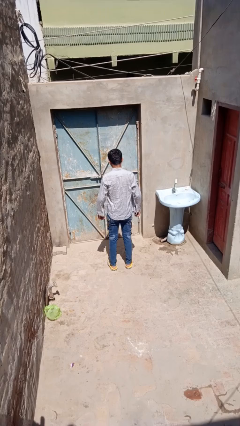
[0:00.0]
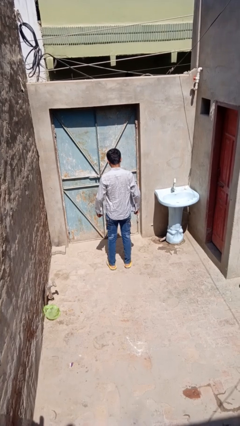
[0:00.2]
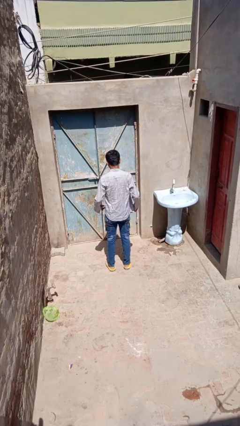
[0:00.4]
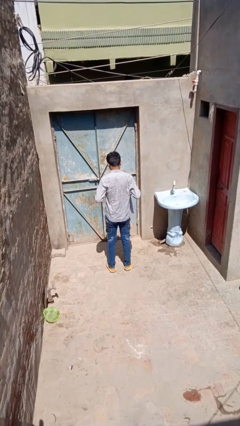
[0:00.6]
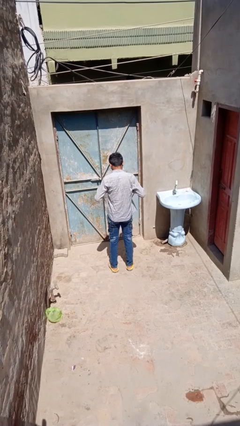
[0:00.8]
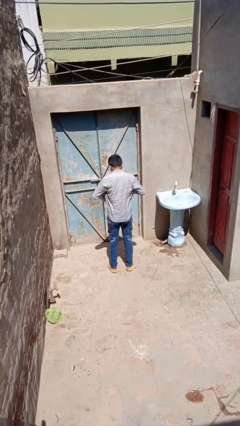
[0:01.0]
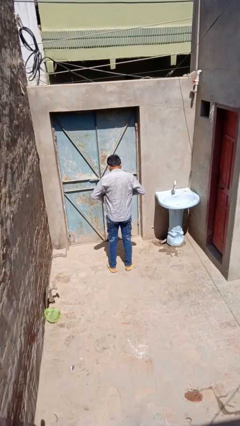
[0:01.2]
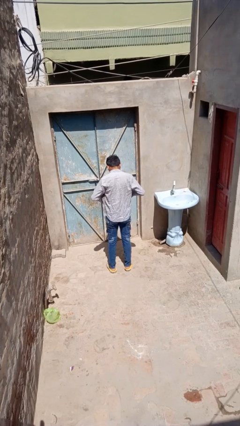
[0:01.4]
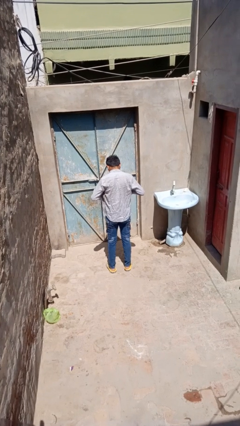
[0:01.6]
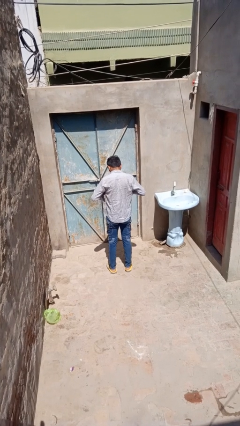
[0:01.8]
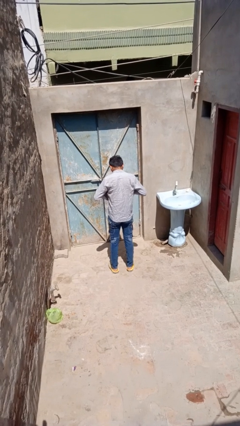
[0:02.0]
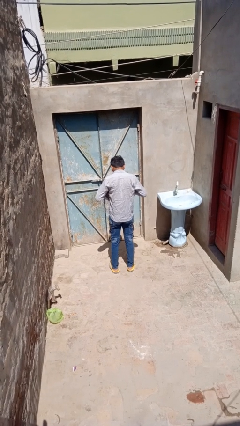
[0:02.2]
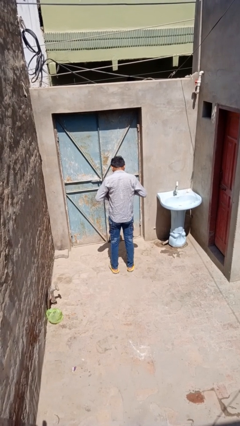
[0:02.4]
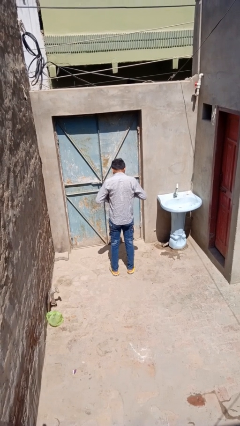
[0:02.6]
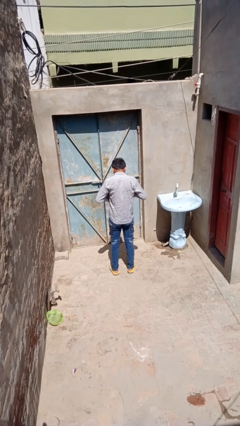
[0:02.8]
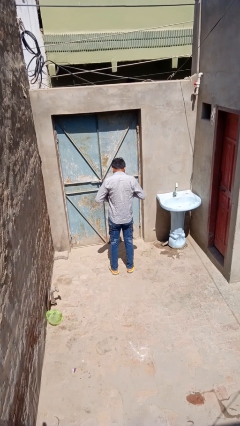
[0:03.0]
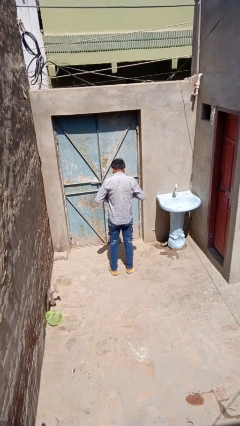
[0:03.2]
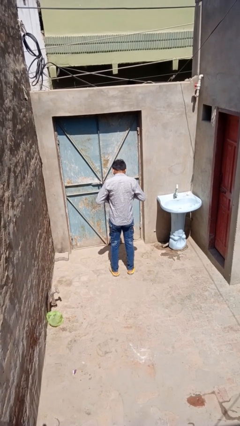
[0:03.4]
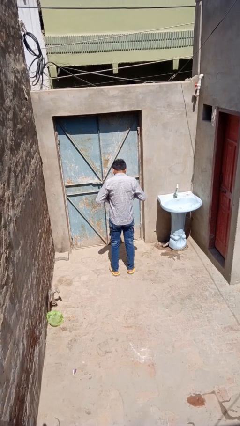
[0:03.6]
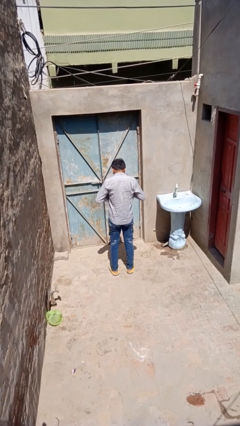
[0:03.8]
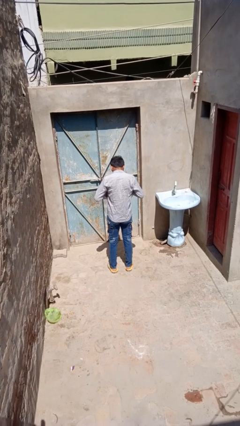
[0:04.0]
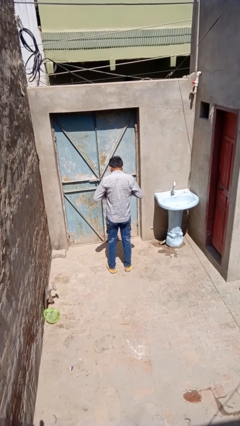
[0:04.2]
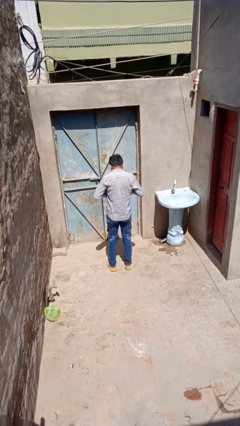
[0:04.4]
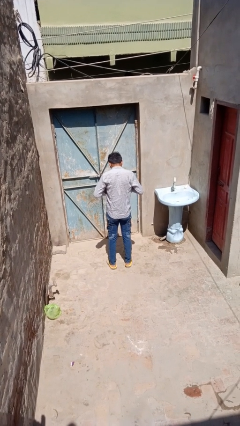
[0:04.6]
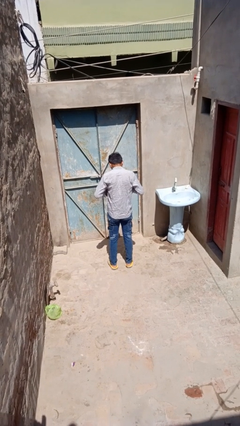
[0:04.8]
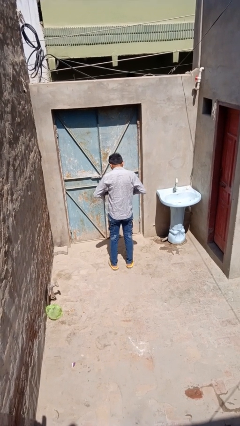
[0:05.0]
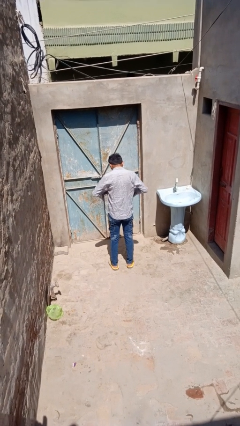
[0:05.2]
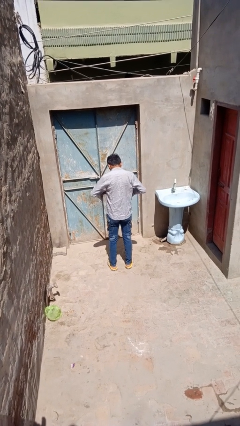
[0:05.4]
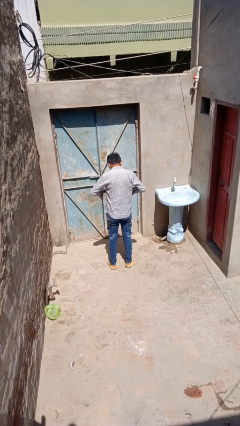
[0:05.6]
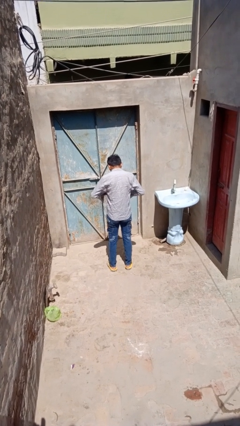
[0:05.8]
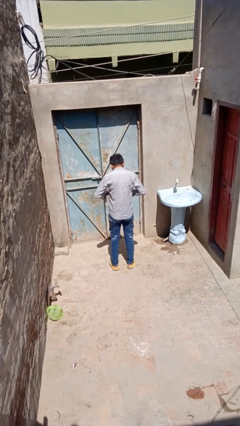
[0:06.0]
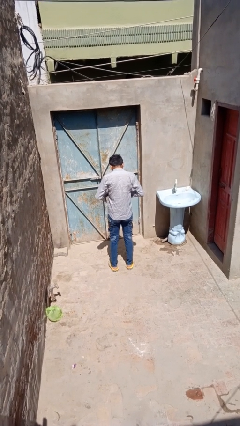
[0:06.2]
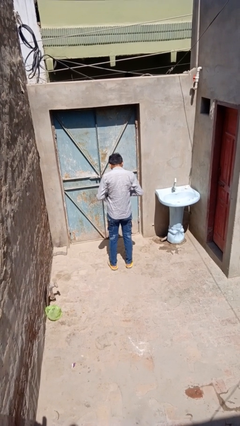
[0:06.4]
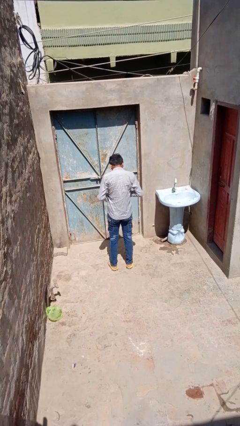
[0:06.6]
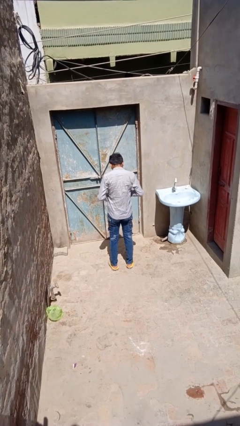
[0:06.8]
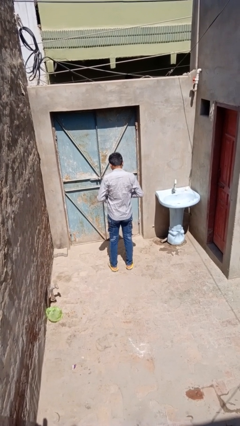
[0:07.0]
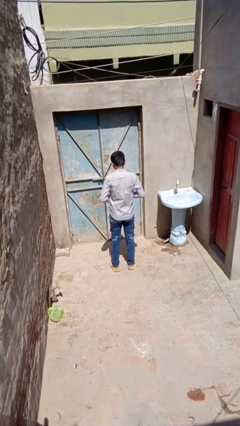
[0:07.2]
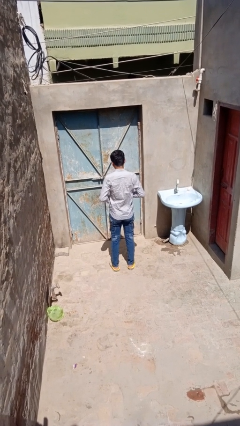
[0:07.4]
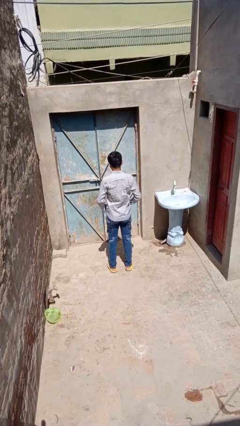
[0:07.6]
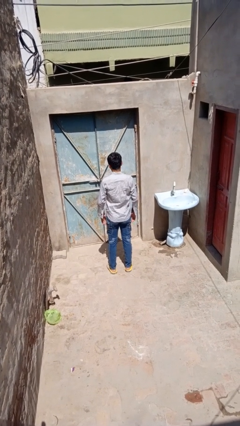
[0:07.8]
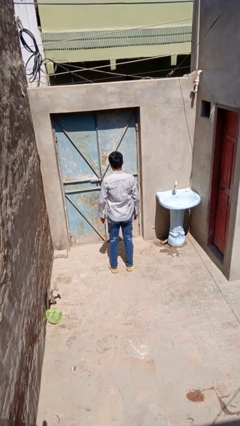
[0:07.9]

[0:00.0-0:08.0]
person buttons shirt

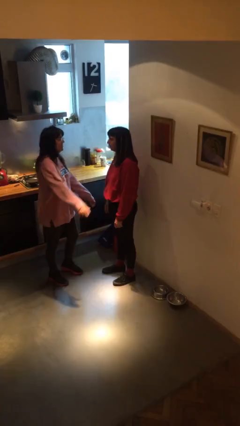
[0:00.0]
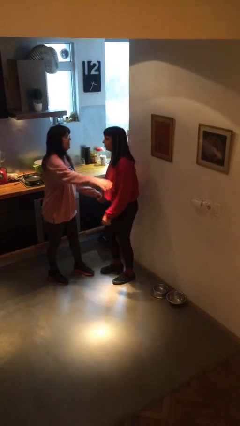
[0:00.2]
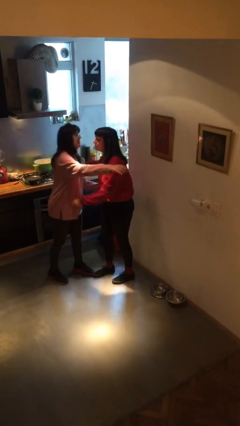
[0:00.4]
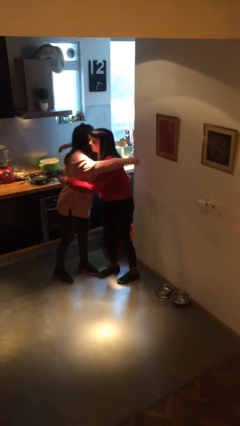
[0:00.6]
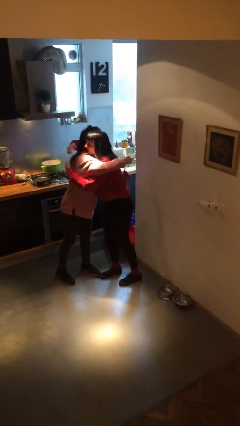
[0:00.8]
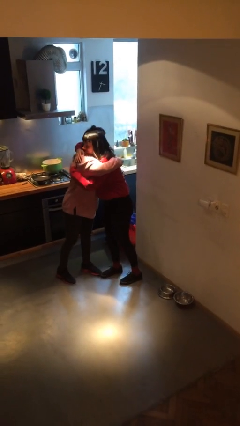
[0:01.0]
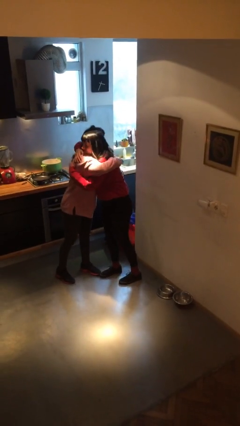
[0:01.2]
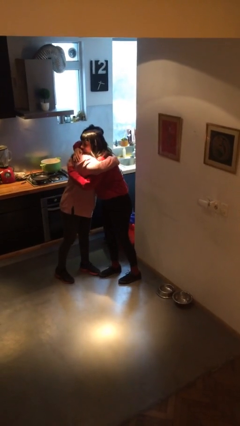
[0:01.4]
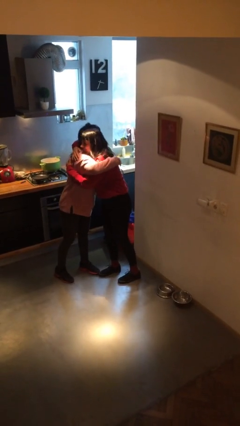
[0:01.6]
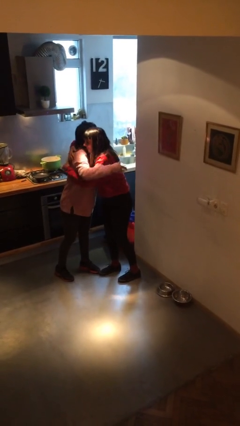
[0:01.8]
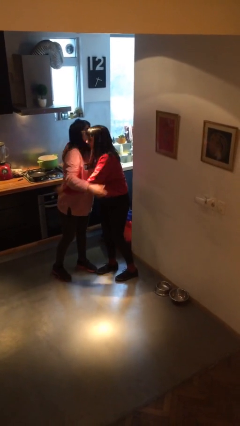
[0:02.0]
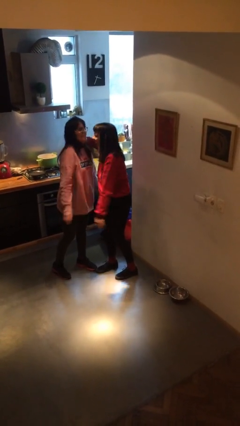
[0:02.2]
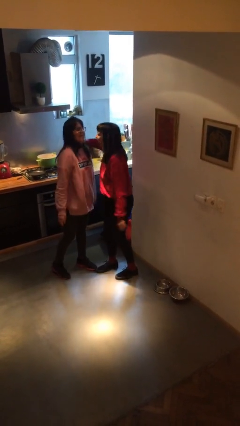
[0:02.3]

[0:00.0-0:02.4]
person embraces person

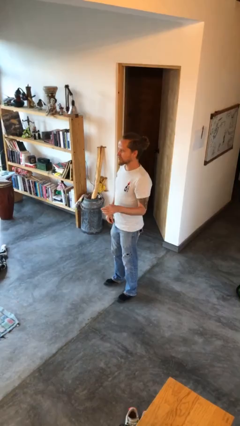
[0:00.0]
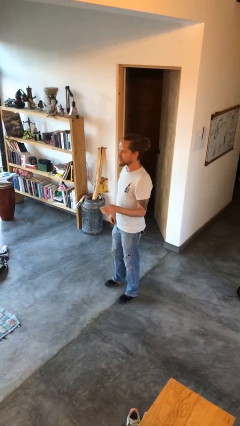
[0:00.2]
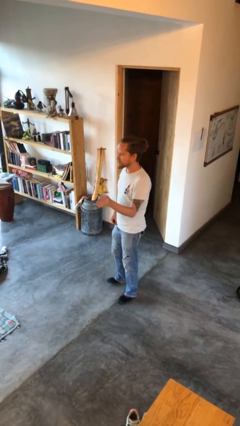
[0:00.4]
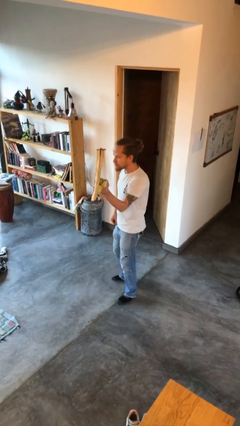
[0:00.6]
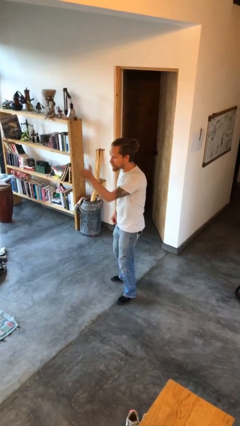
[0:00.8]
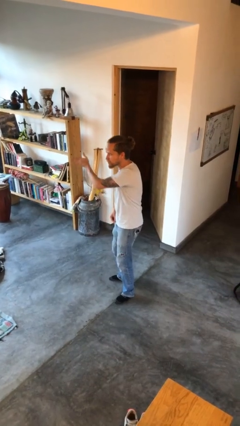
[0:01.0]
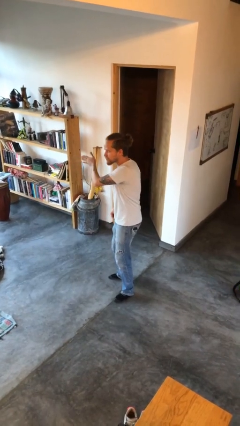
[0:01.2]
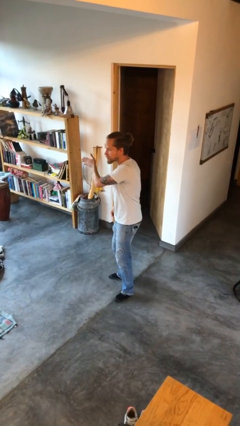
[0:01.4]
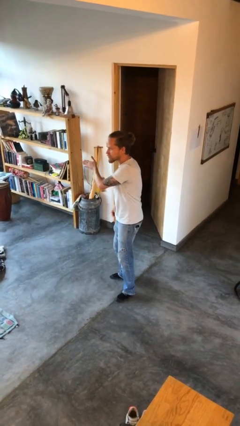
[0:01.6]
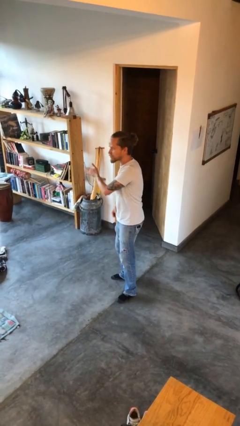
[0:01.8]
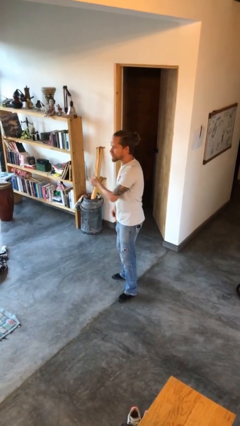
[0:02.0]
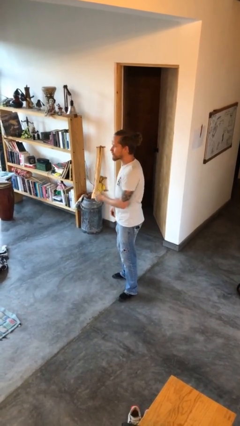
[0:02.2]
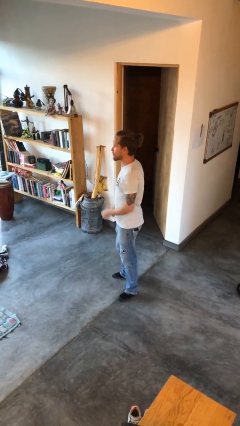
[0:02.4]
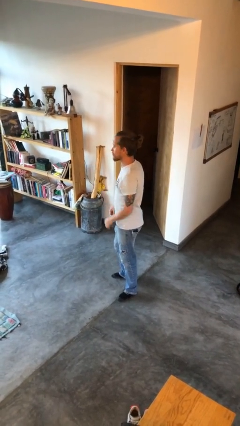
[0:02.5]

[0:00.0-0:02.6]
person gestures swipe right

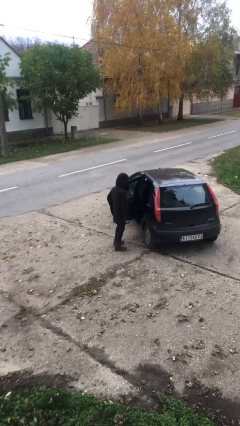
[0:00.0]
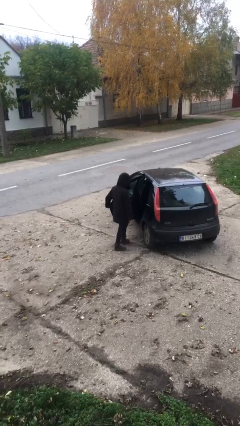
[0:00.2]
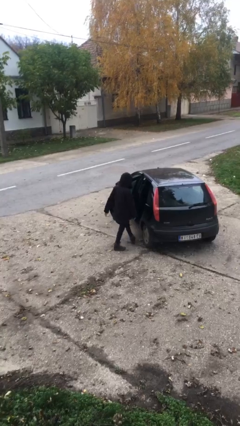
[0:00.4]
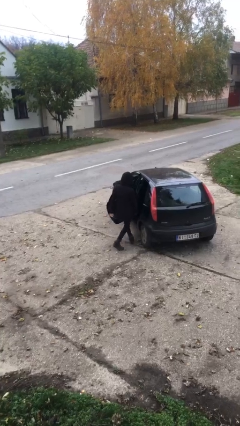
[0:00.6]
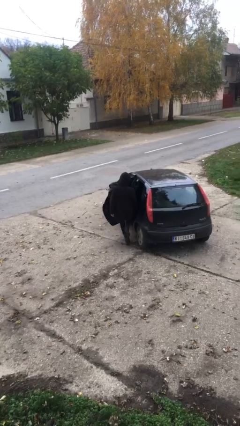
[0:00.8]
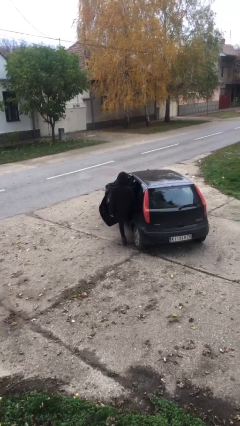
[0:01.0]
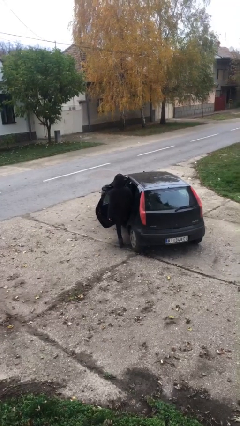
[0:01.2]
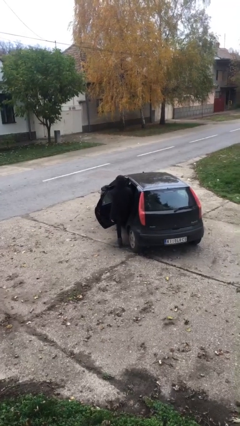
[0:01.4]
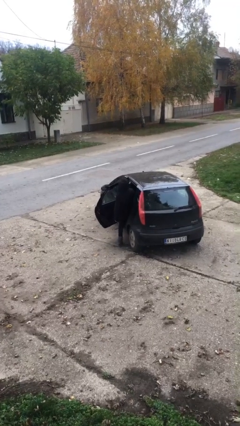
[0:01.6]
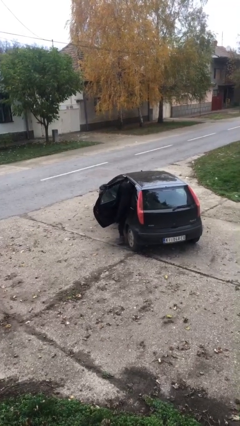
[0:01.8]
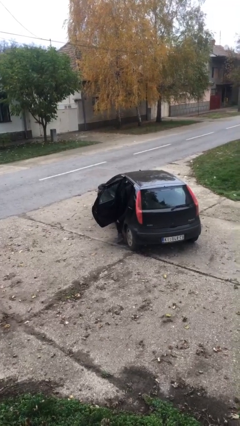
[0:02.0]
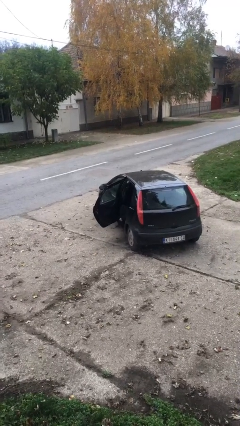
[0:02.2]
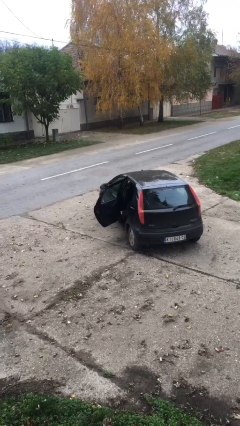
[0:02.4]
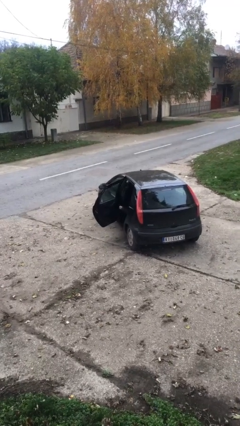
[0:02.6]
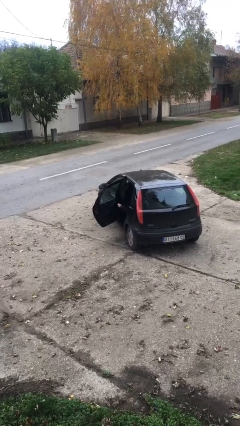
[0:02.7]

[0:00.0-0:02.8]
person enters car

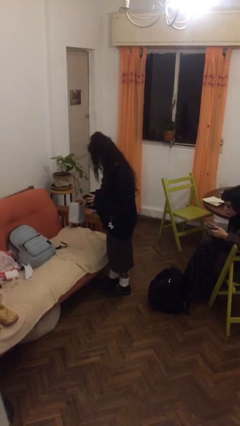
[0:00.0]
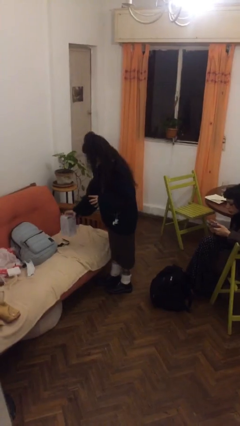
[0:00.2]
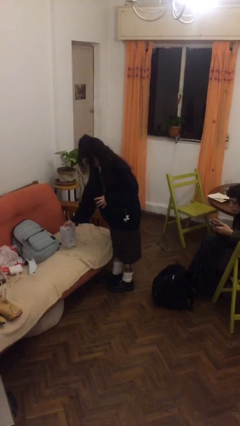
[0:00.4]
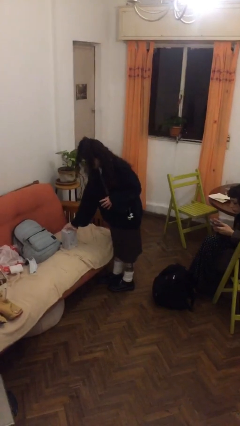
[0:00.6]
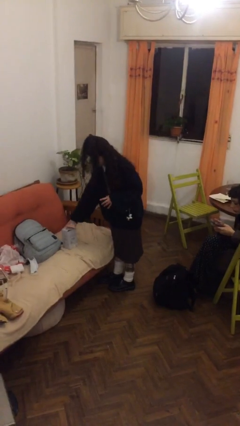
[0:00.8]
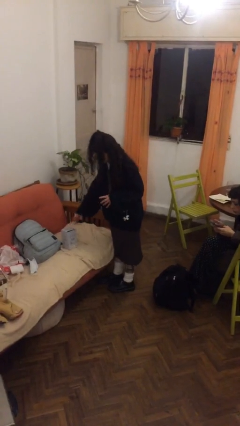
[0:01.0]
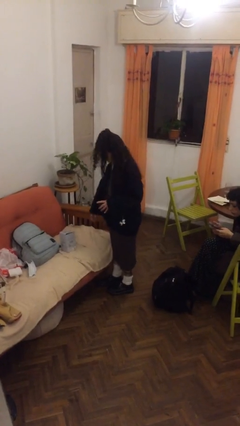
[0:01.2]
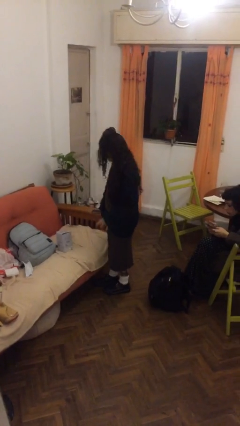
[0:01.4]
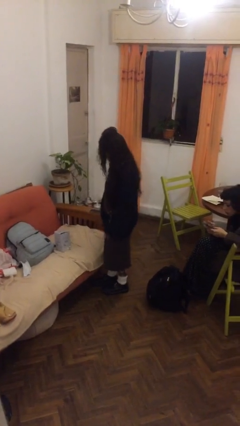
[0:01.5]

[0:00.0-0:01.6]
person puts down object on couch
